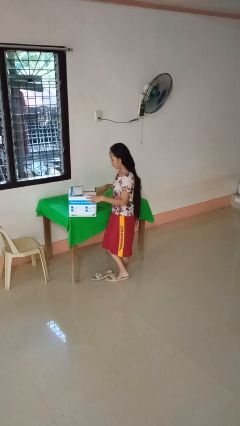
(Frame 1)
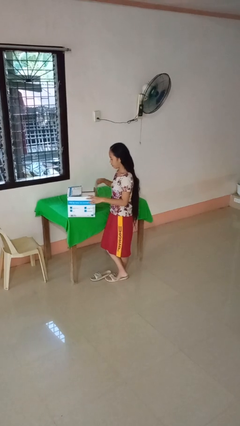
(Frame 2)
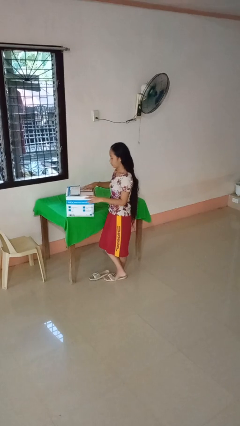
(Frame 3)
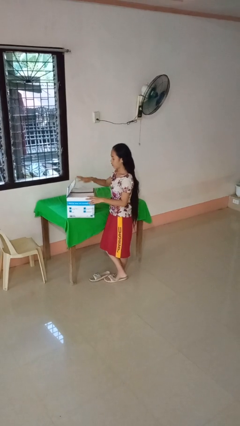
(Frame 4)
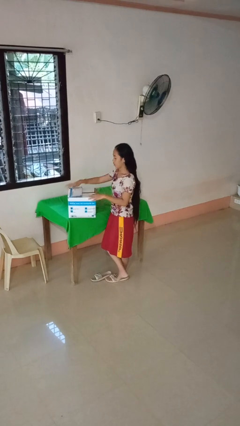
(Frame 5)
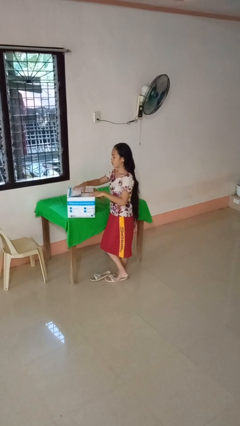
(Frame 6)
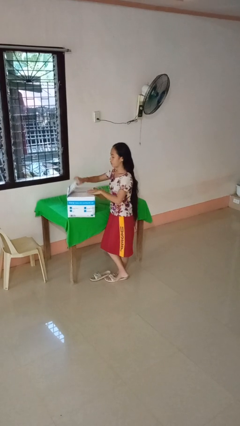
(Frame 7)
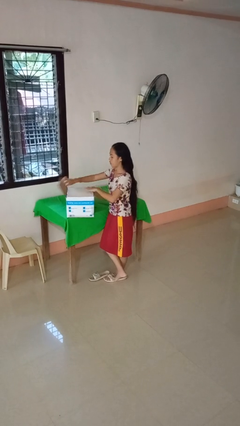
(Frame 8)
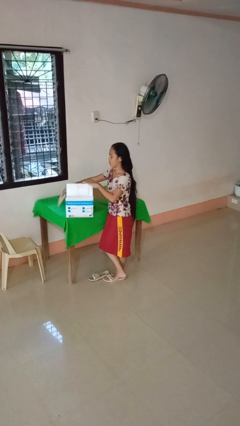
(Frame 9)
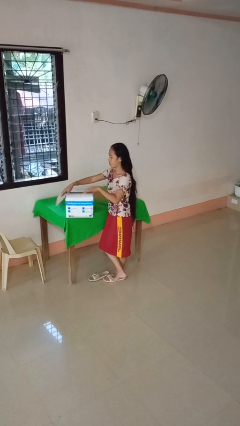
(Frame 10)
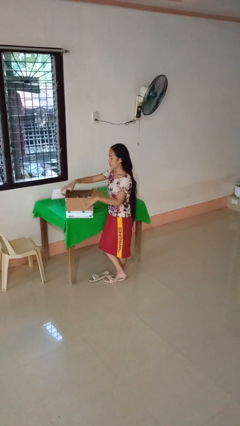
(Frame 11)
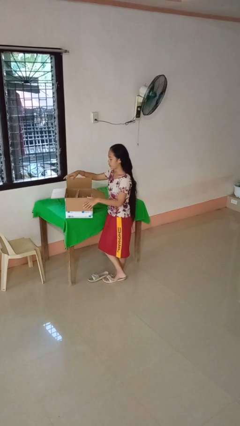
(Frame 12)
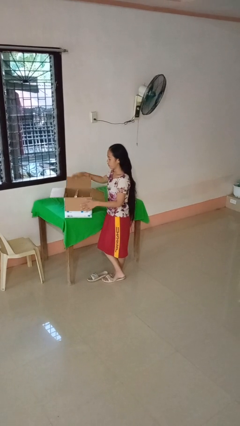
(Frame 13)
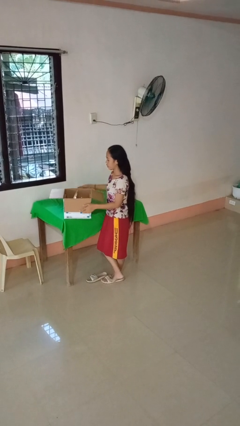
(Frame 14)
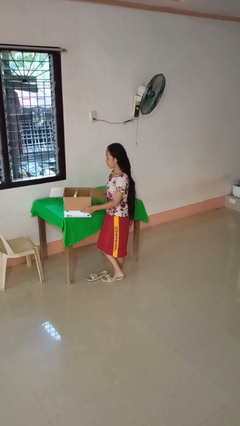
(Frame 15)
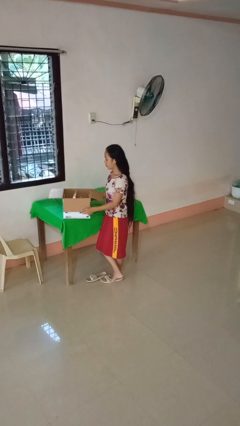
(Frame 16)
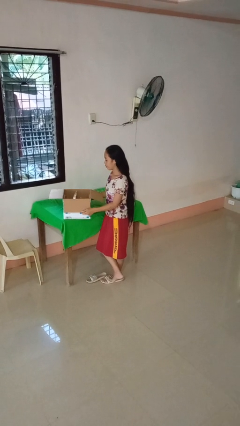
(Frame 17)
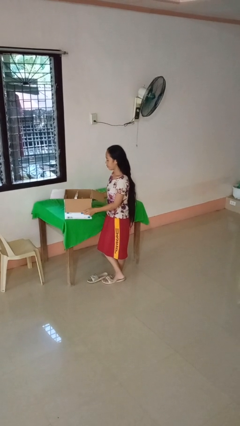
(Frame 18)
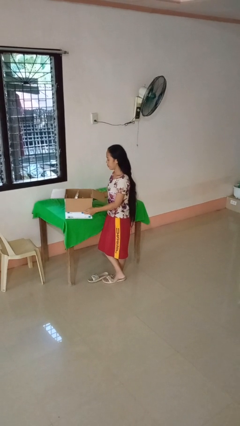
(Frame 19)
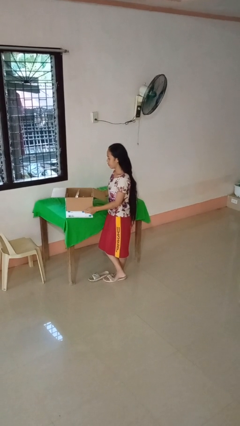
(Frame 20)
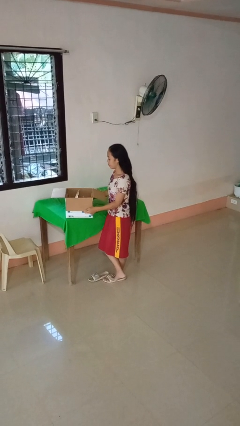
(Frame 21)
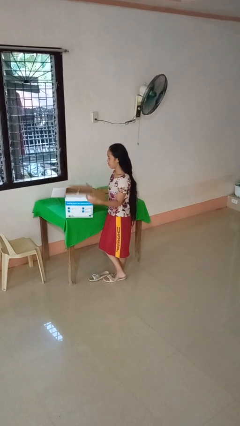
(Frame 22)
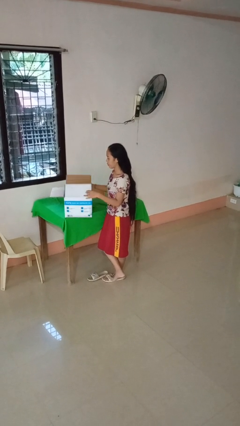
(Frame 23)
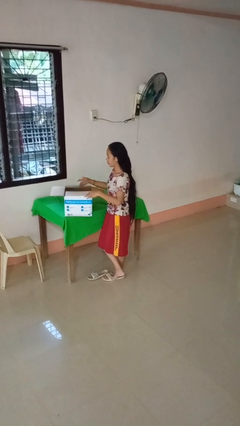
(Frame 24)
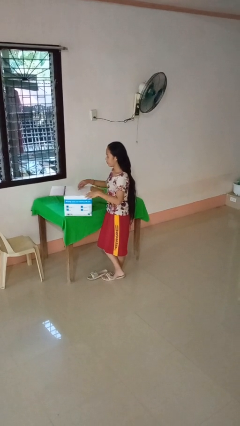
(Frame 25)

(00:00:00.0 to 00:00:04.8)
person opens box

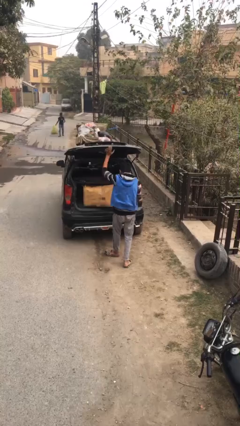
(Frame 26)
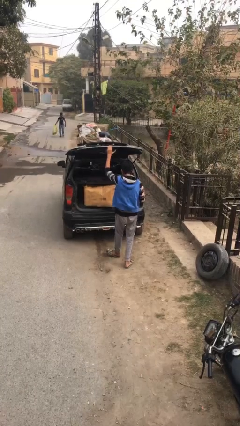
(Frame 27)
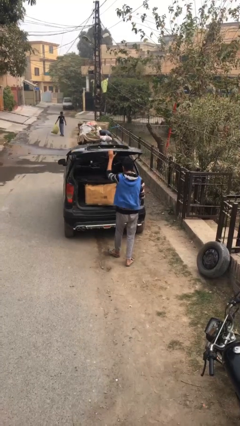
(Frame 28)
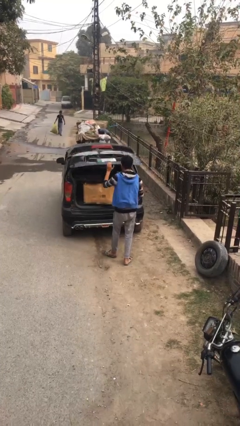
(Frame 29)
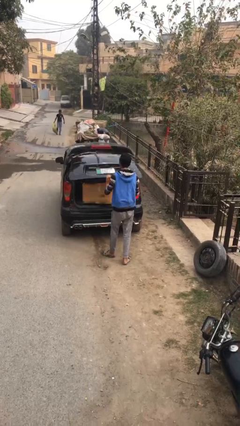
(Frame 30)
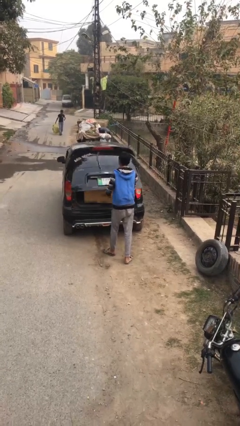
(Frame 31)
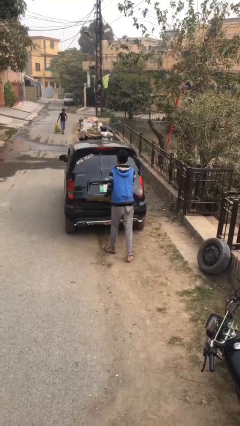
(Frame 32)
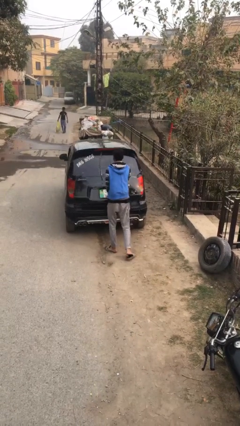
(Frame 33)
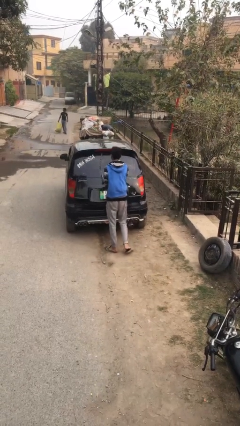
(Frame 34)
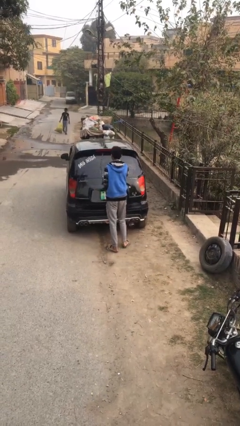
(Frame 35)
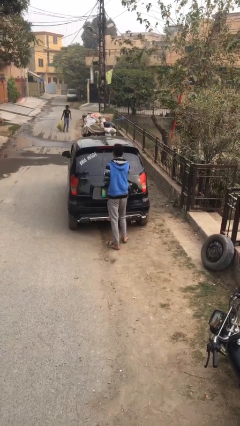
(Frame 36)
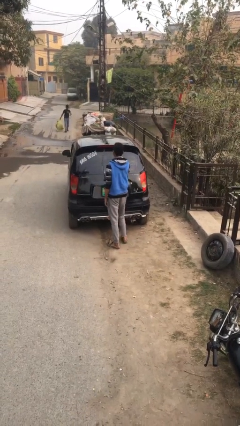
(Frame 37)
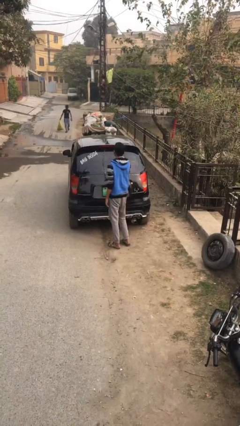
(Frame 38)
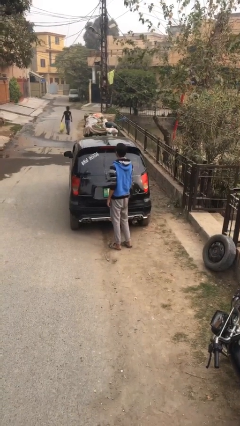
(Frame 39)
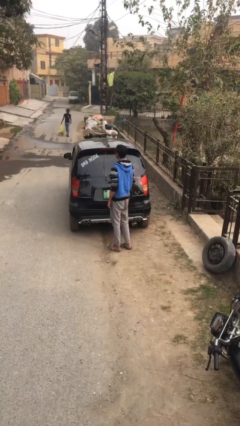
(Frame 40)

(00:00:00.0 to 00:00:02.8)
person closes car trunk

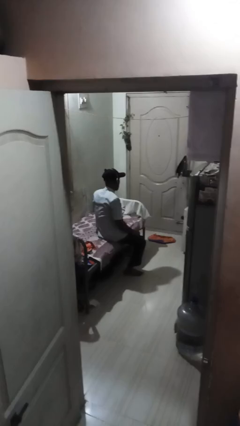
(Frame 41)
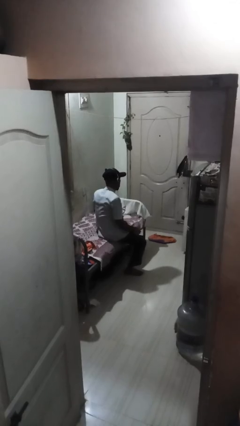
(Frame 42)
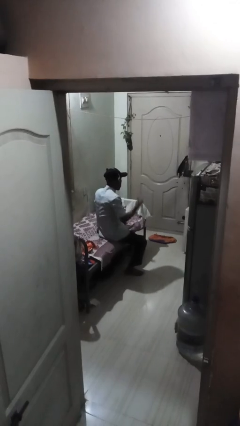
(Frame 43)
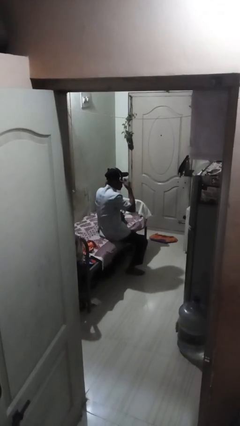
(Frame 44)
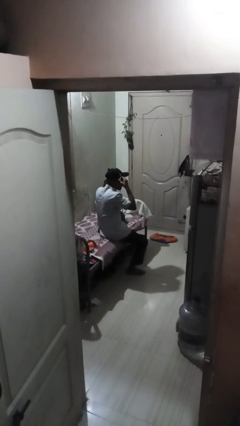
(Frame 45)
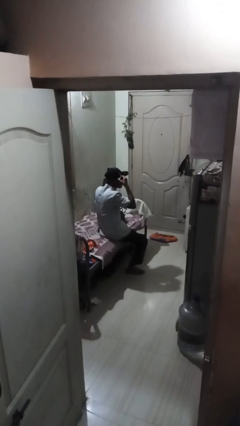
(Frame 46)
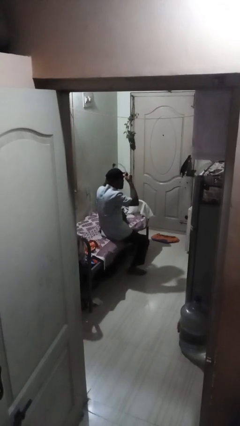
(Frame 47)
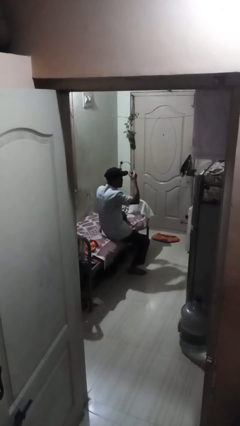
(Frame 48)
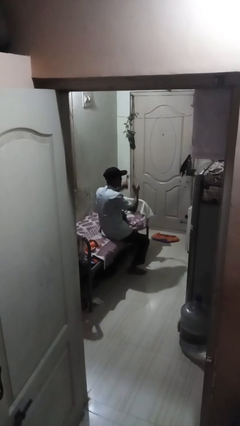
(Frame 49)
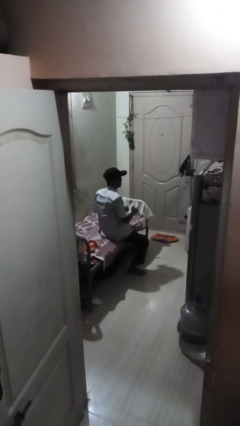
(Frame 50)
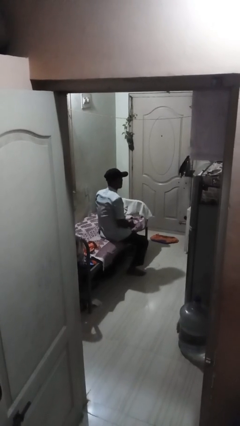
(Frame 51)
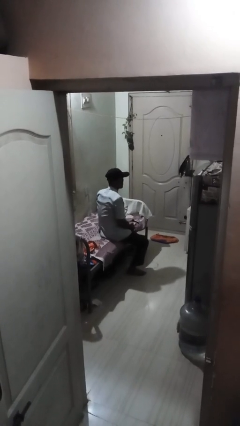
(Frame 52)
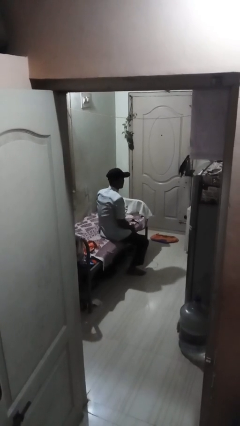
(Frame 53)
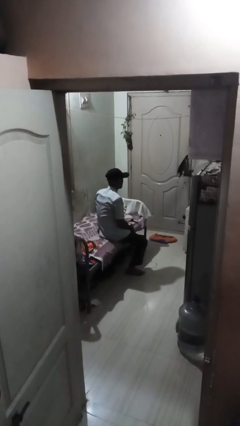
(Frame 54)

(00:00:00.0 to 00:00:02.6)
person takes off headphones

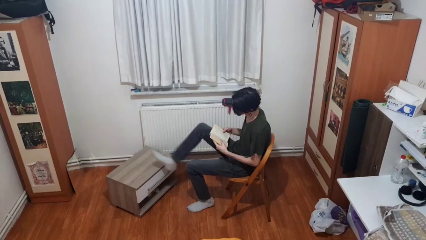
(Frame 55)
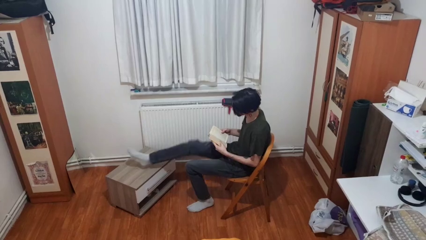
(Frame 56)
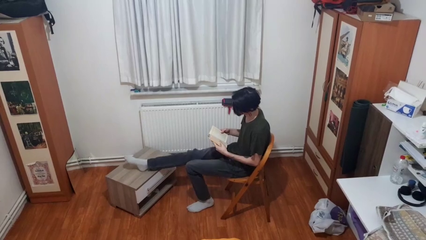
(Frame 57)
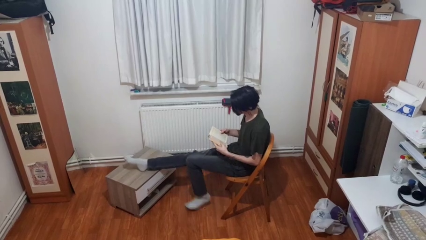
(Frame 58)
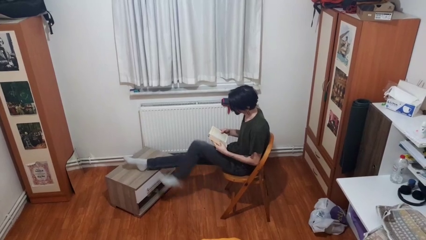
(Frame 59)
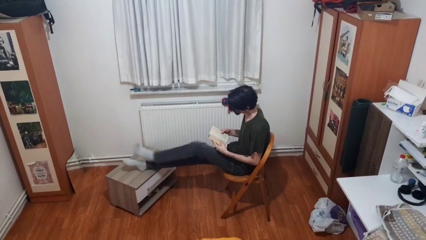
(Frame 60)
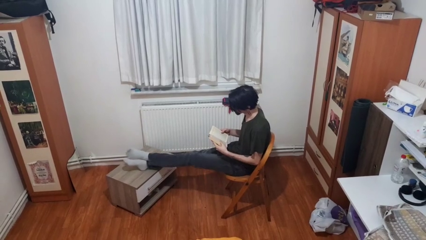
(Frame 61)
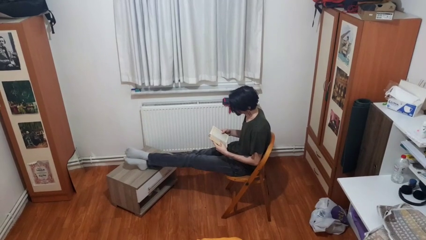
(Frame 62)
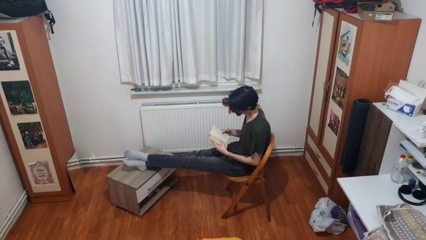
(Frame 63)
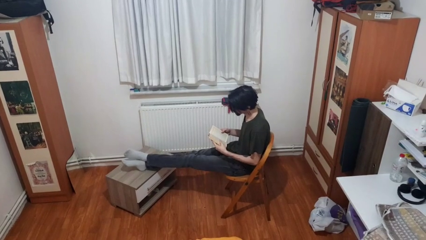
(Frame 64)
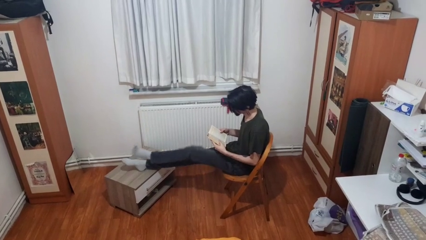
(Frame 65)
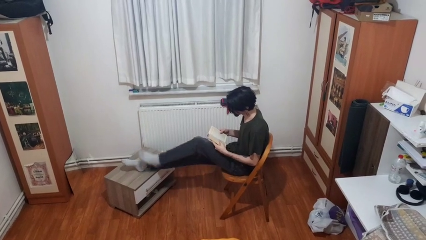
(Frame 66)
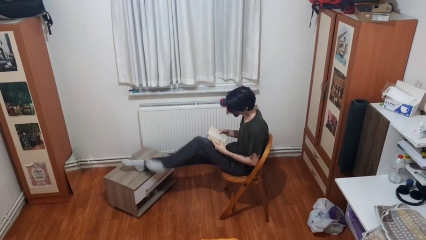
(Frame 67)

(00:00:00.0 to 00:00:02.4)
person puts feet up

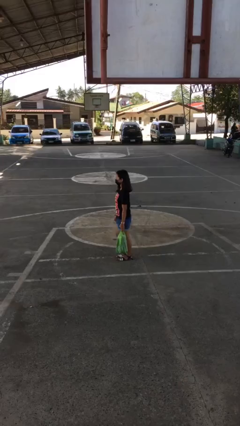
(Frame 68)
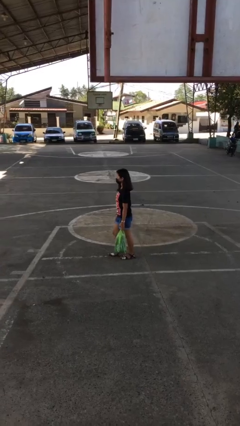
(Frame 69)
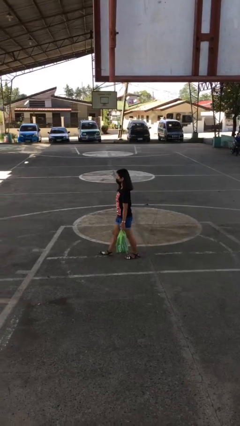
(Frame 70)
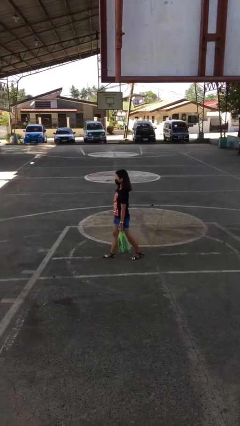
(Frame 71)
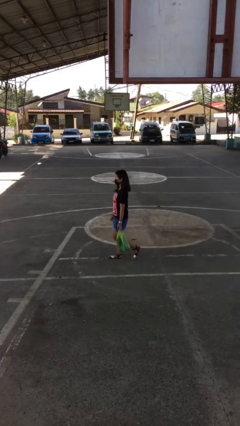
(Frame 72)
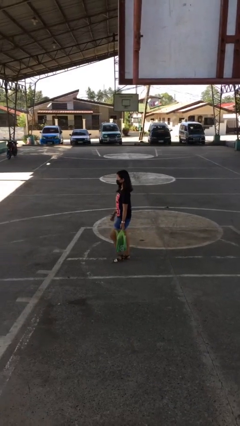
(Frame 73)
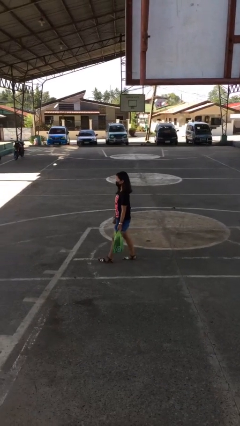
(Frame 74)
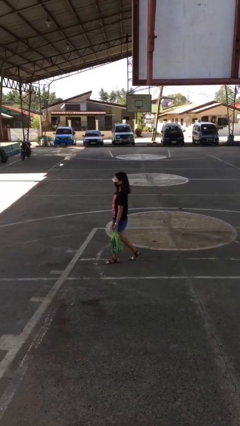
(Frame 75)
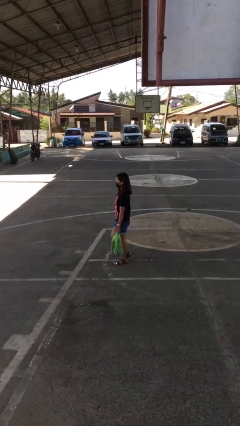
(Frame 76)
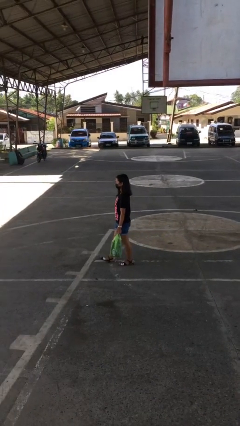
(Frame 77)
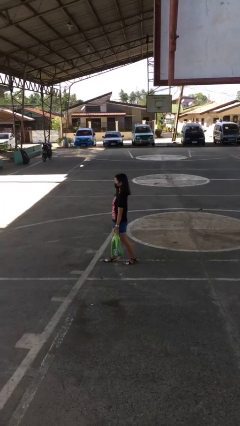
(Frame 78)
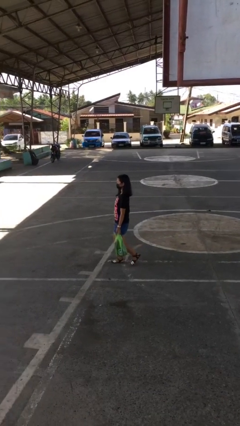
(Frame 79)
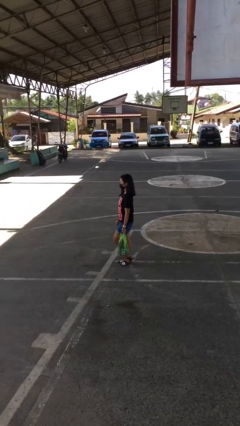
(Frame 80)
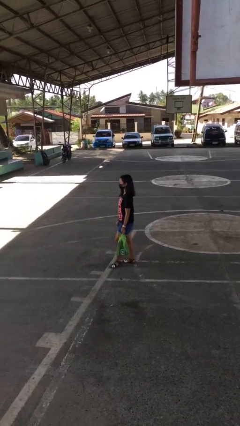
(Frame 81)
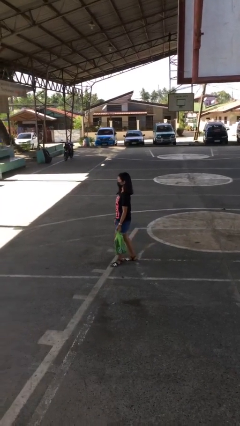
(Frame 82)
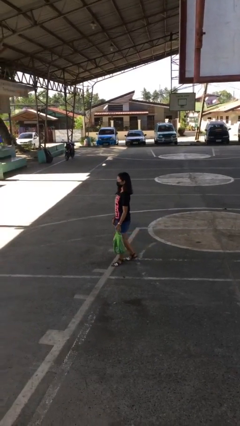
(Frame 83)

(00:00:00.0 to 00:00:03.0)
person carries groceries

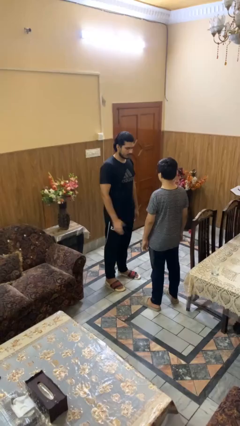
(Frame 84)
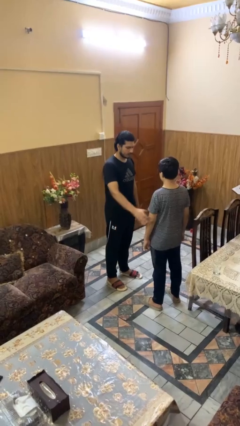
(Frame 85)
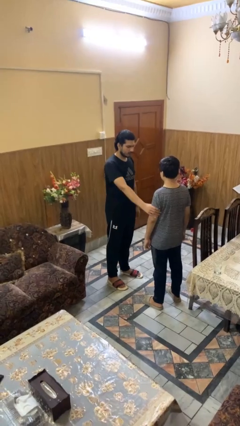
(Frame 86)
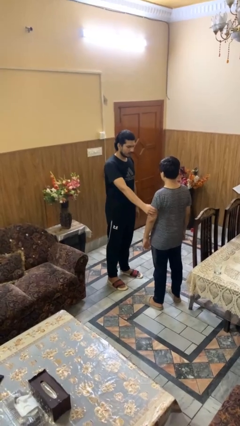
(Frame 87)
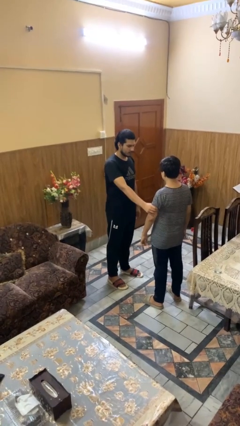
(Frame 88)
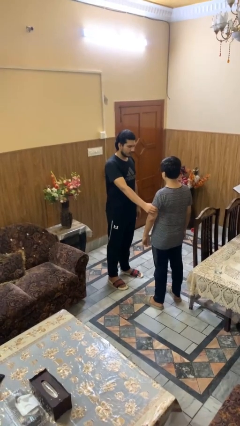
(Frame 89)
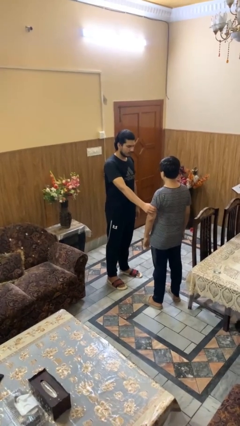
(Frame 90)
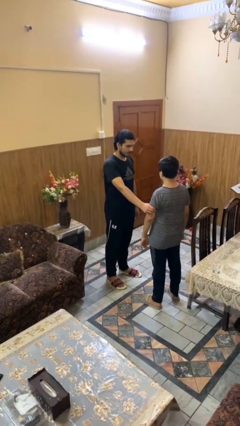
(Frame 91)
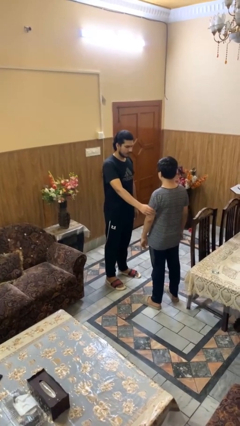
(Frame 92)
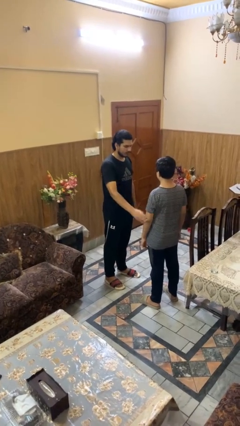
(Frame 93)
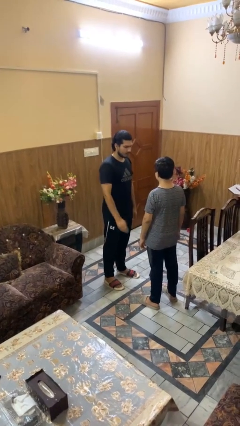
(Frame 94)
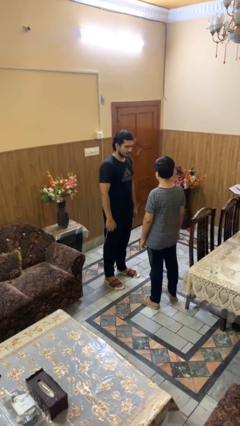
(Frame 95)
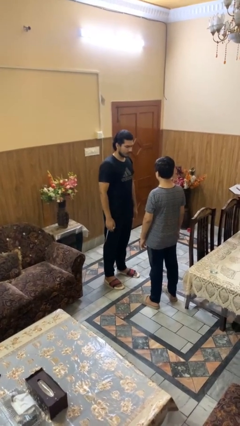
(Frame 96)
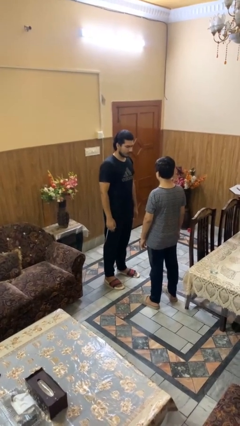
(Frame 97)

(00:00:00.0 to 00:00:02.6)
person grabs person by bicep
